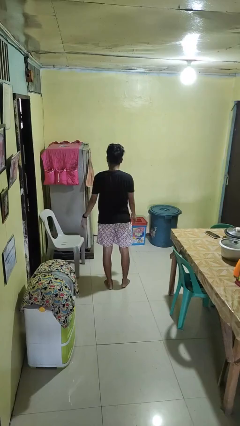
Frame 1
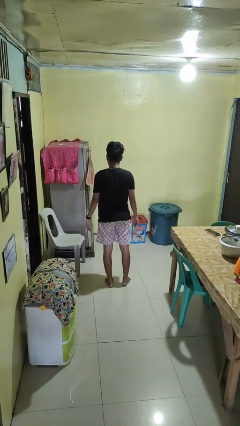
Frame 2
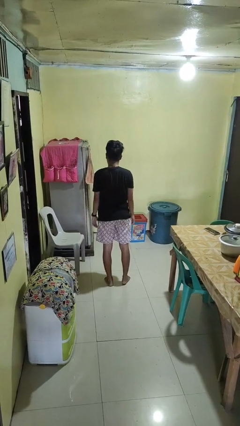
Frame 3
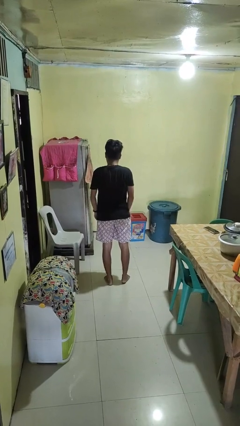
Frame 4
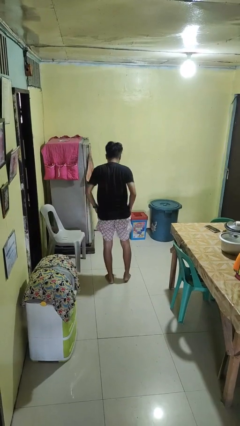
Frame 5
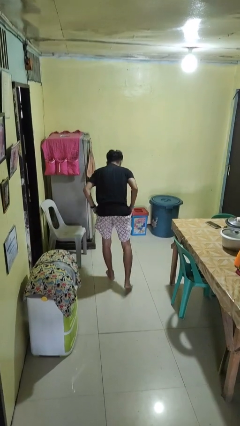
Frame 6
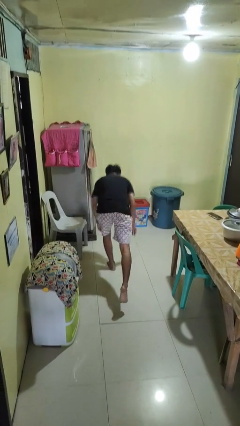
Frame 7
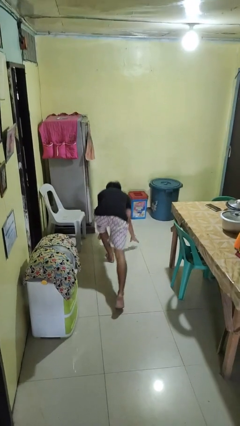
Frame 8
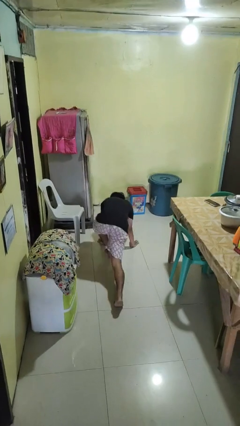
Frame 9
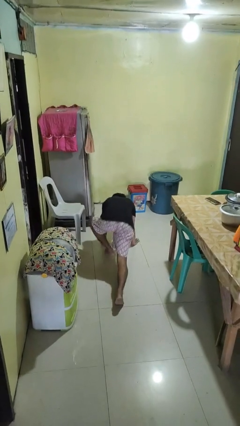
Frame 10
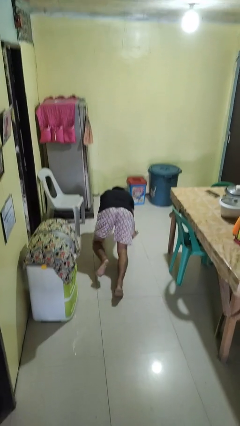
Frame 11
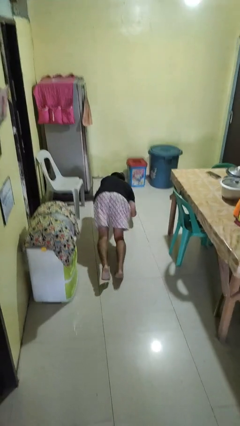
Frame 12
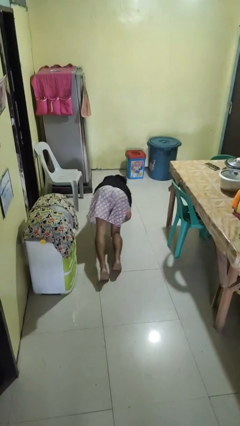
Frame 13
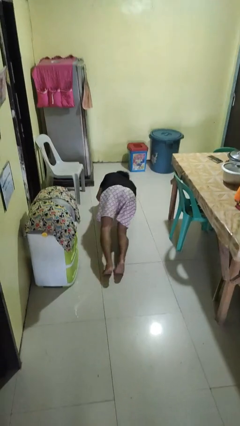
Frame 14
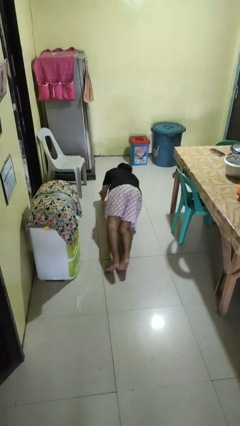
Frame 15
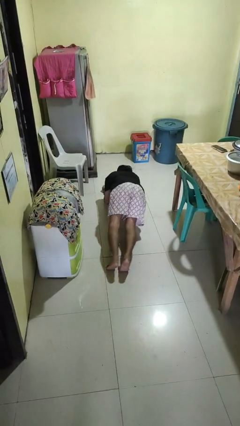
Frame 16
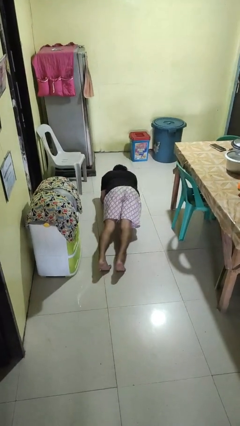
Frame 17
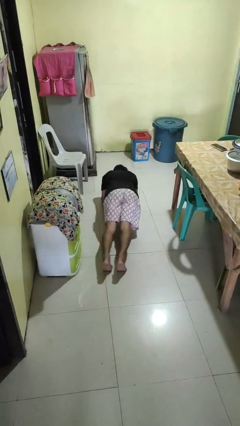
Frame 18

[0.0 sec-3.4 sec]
person exercises with plank

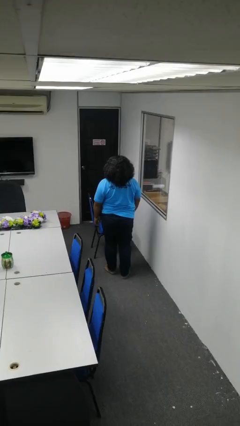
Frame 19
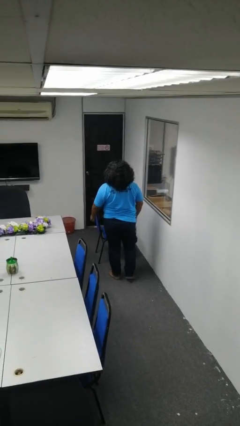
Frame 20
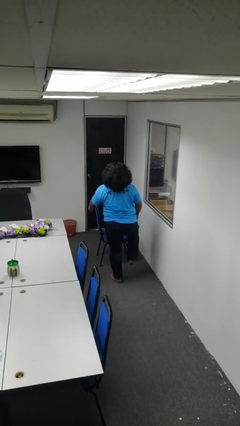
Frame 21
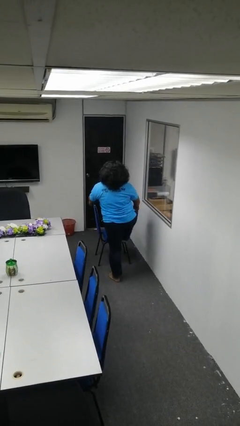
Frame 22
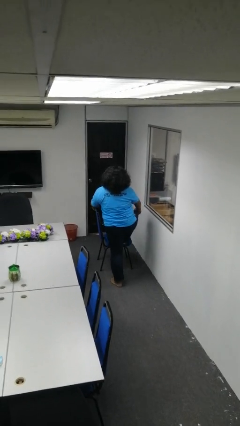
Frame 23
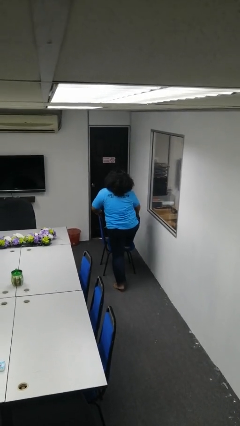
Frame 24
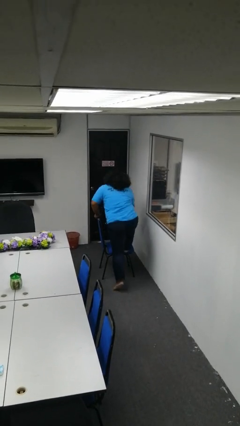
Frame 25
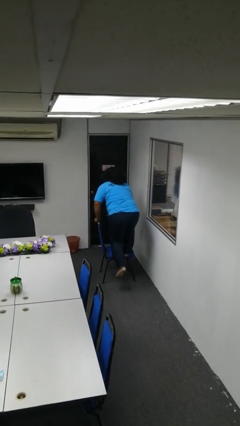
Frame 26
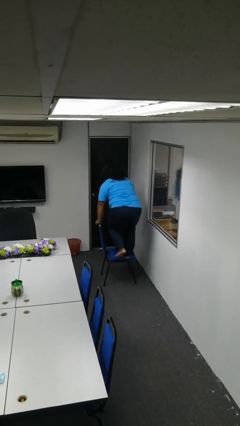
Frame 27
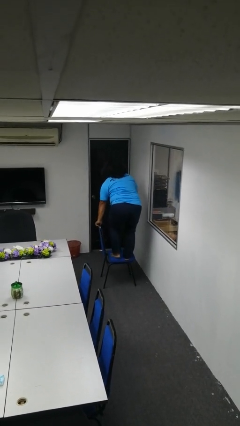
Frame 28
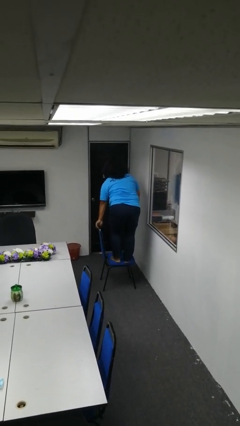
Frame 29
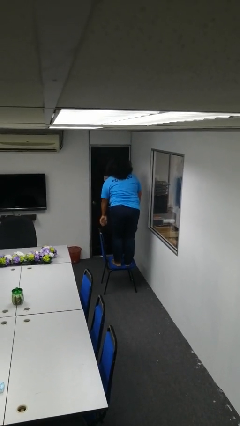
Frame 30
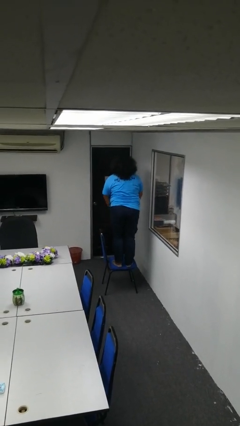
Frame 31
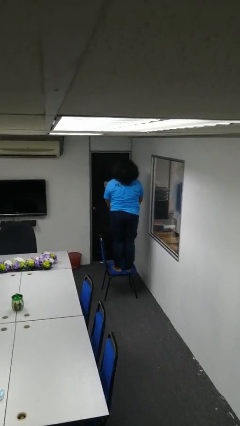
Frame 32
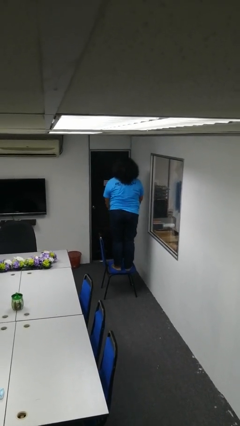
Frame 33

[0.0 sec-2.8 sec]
person climbs on chair

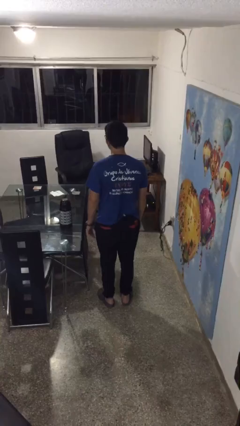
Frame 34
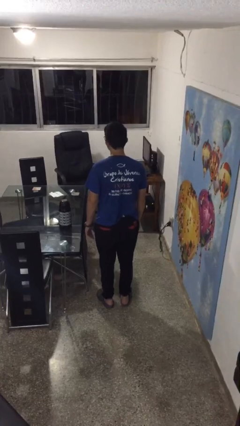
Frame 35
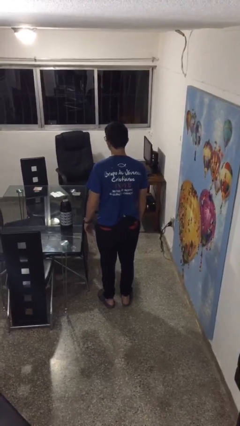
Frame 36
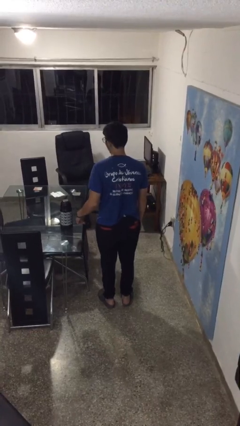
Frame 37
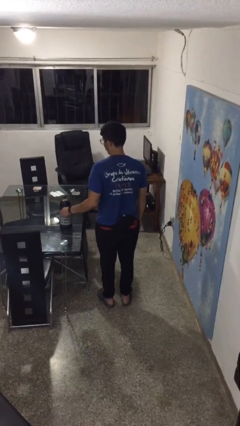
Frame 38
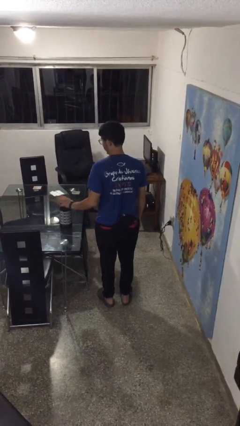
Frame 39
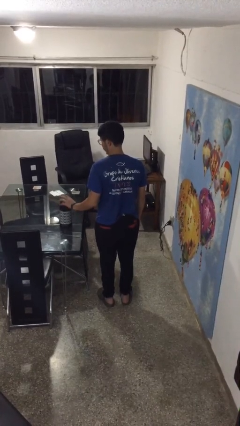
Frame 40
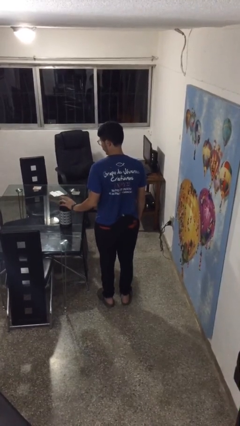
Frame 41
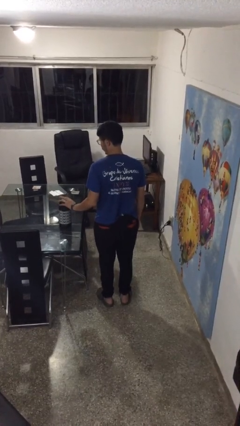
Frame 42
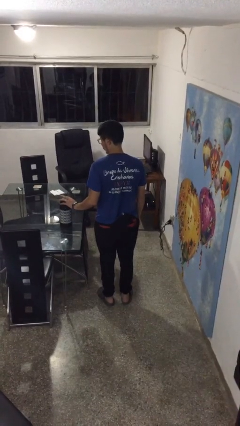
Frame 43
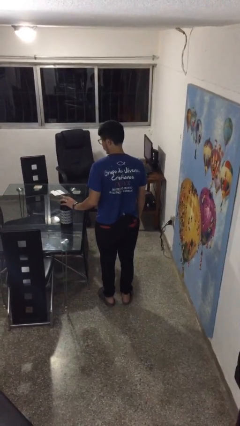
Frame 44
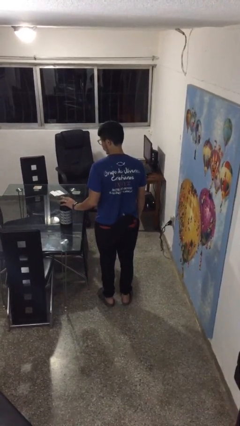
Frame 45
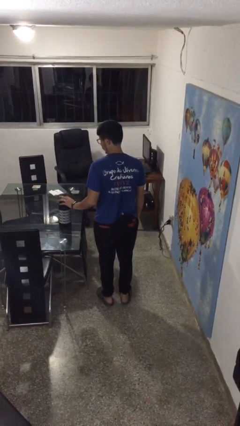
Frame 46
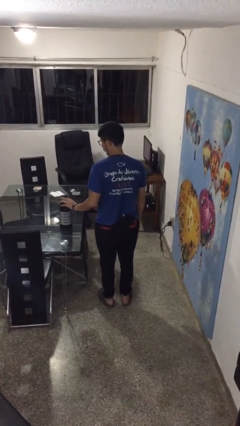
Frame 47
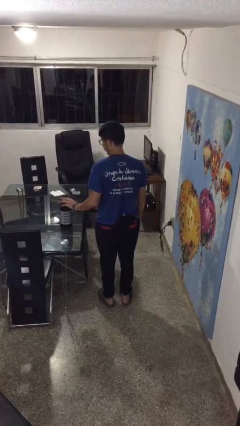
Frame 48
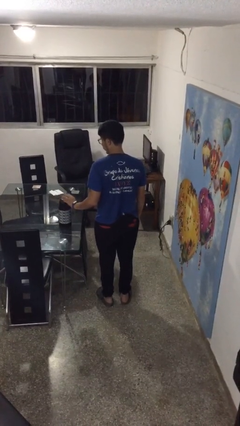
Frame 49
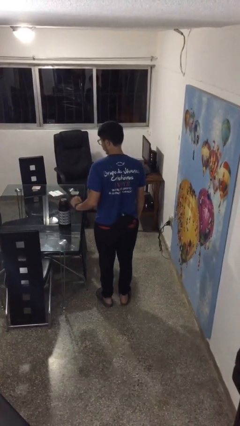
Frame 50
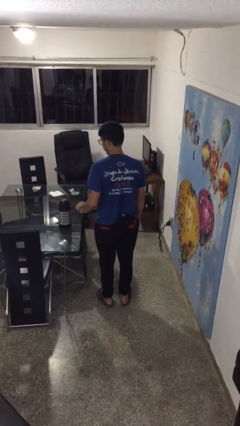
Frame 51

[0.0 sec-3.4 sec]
person taps object with finger

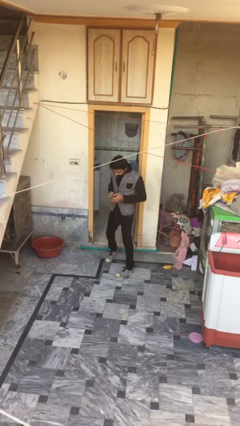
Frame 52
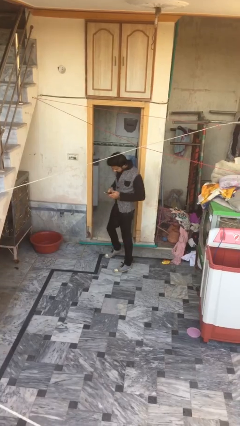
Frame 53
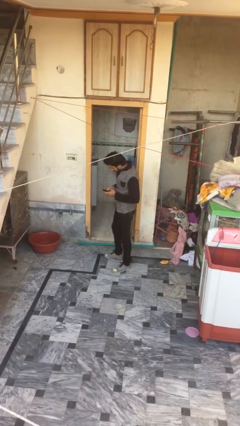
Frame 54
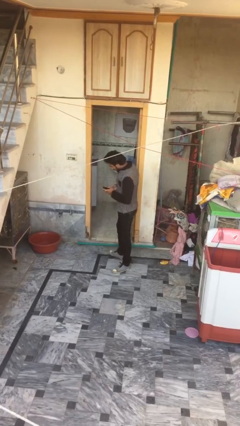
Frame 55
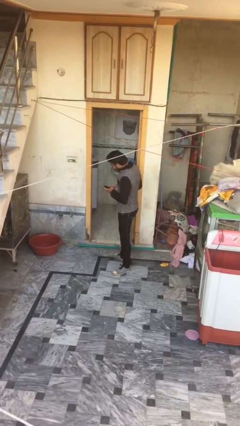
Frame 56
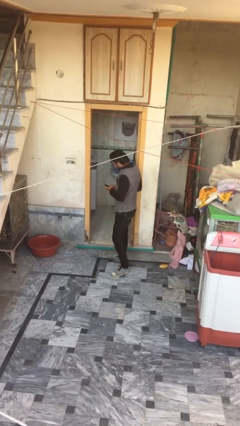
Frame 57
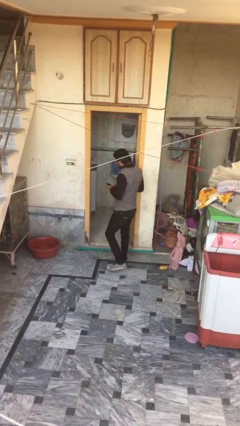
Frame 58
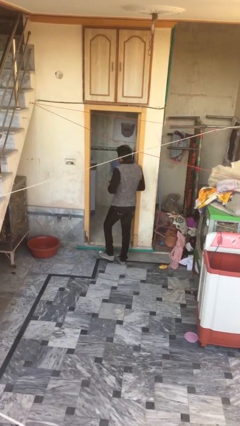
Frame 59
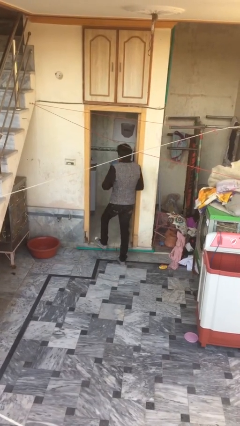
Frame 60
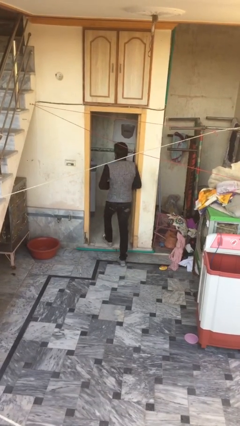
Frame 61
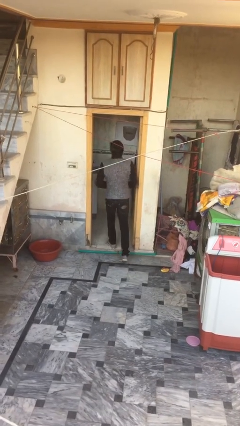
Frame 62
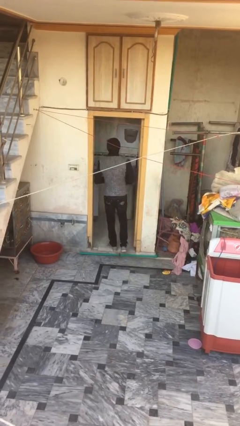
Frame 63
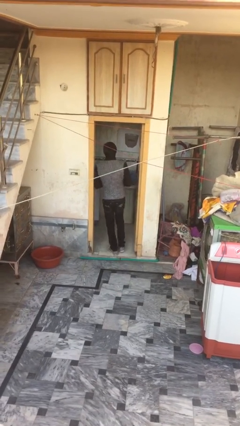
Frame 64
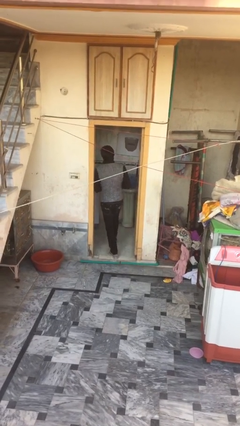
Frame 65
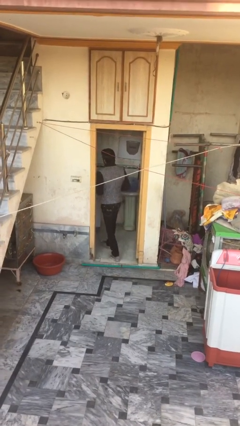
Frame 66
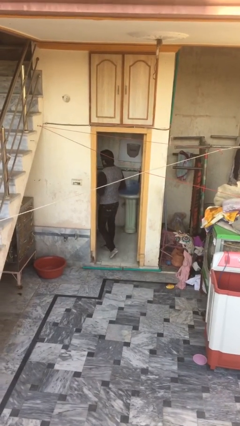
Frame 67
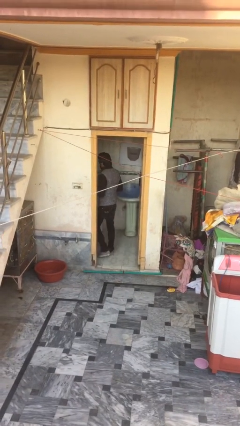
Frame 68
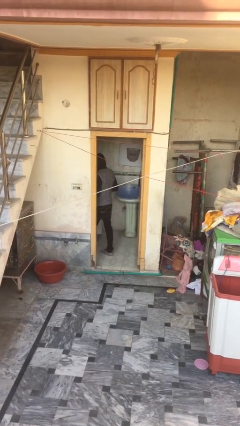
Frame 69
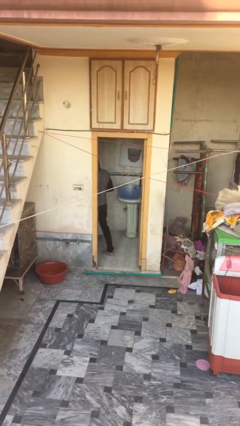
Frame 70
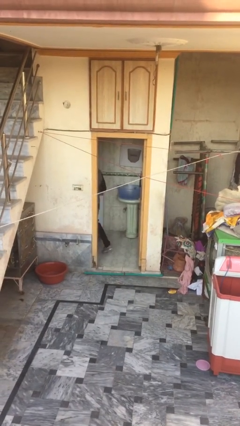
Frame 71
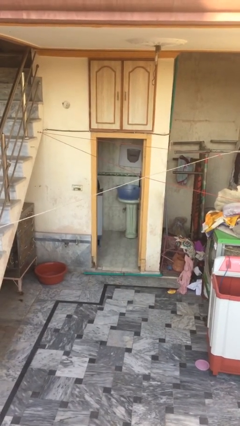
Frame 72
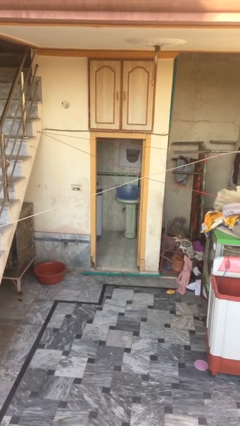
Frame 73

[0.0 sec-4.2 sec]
person exits scene through structure

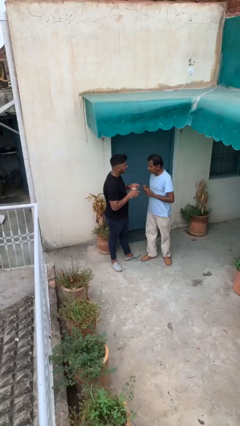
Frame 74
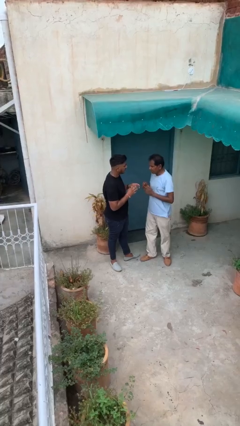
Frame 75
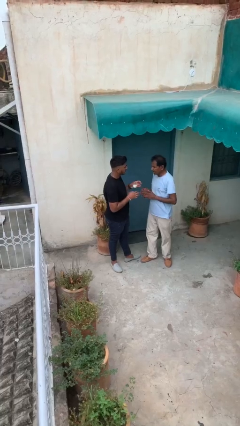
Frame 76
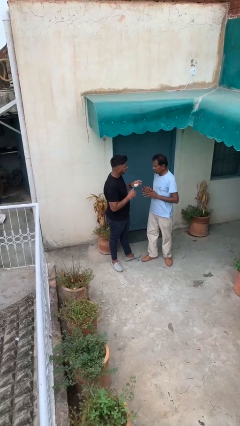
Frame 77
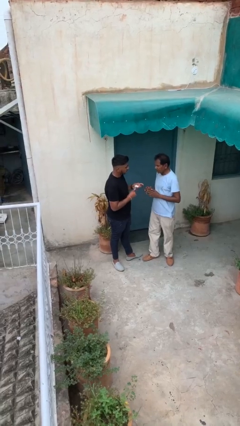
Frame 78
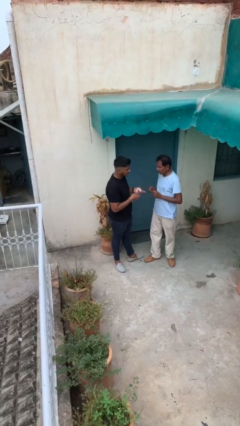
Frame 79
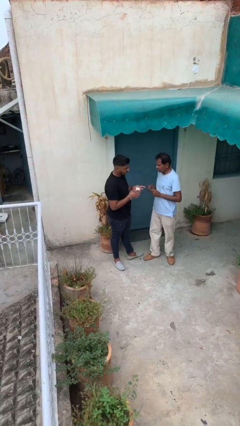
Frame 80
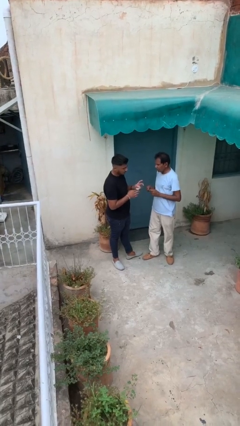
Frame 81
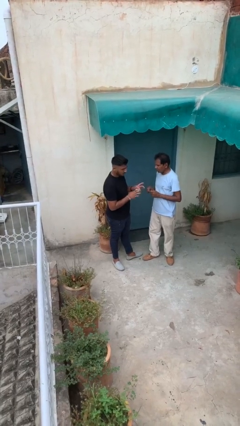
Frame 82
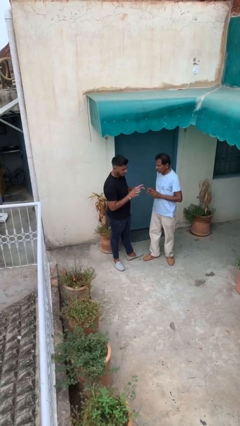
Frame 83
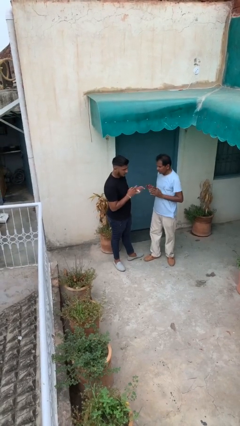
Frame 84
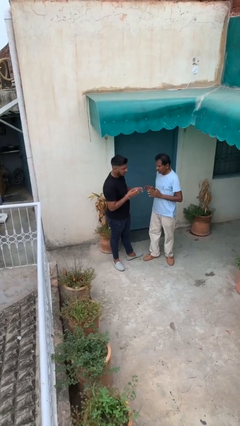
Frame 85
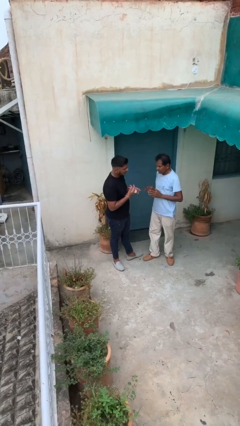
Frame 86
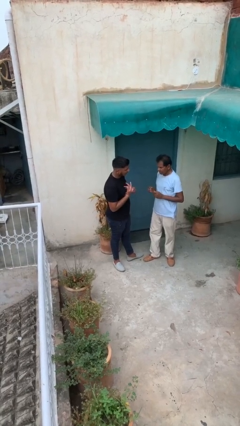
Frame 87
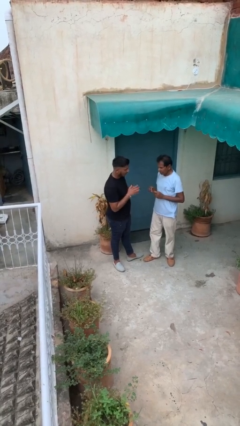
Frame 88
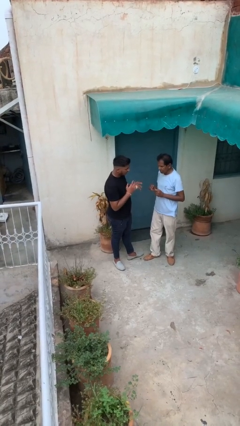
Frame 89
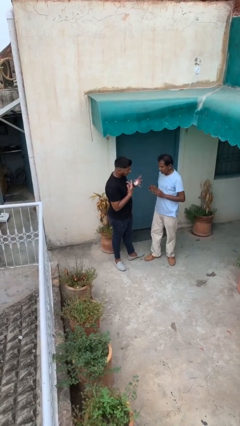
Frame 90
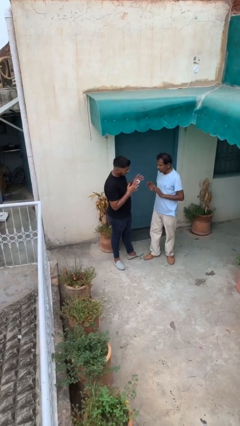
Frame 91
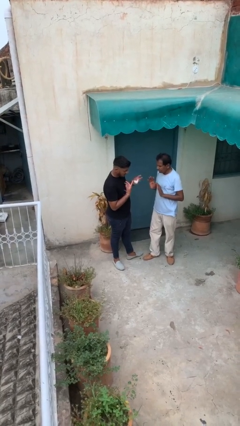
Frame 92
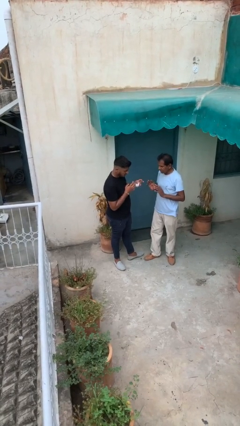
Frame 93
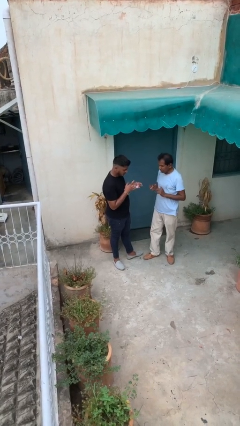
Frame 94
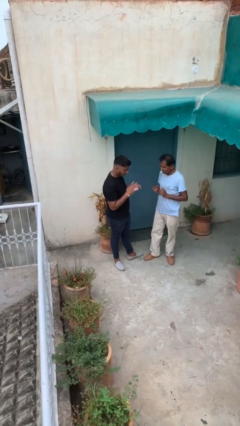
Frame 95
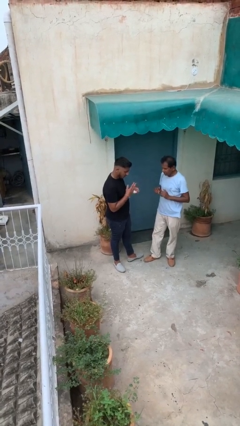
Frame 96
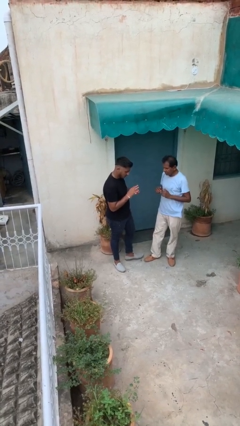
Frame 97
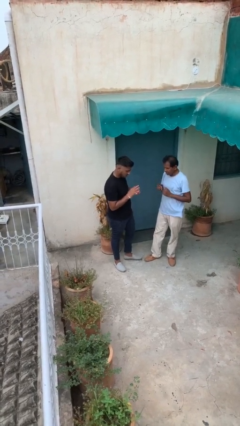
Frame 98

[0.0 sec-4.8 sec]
person talks to person
